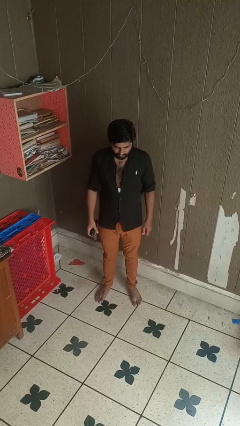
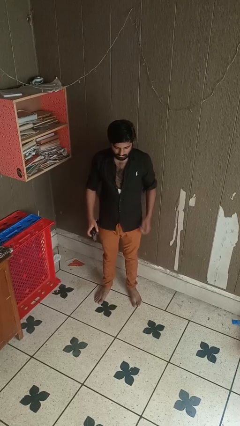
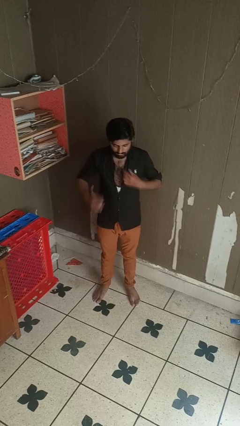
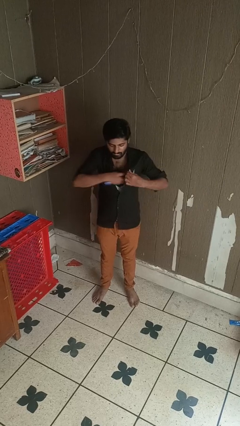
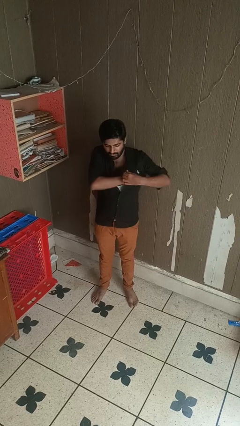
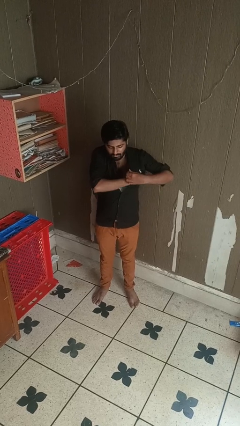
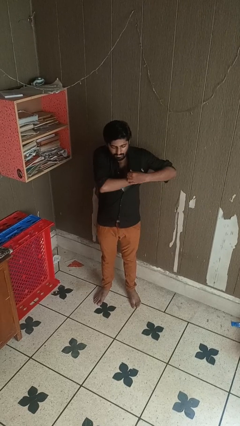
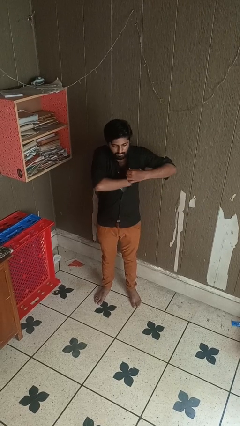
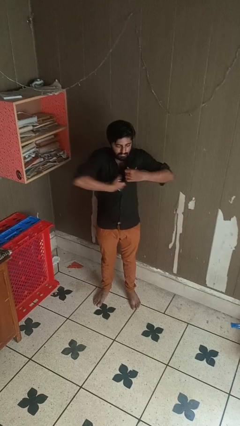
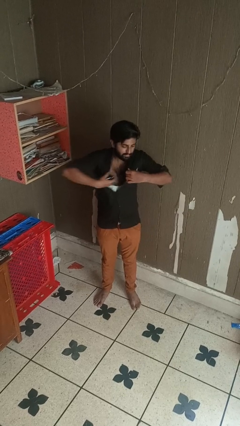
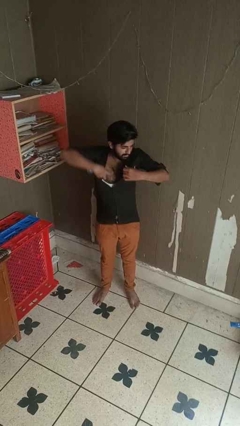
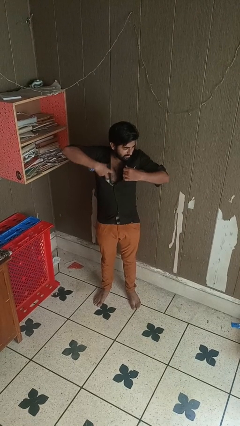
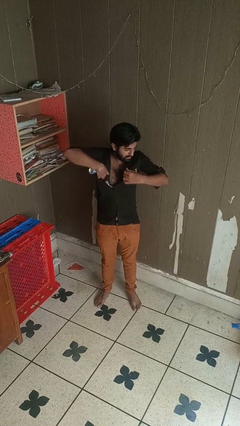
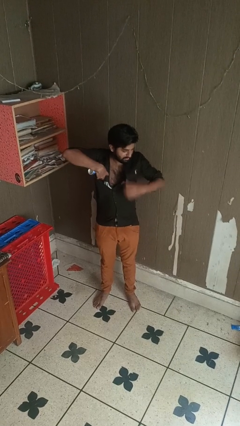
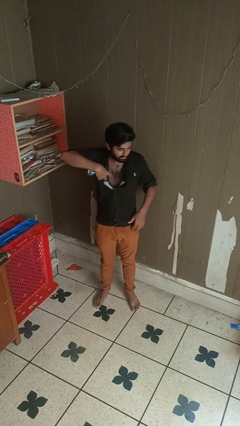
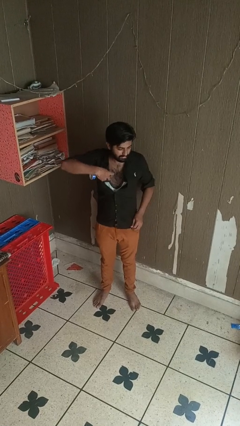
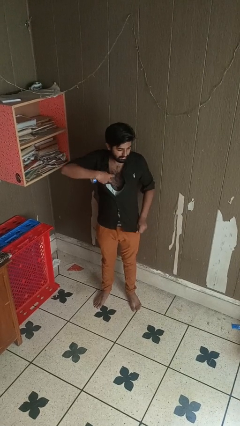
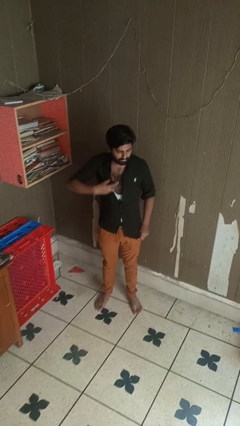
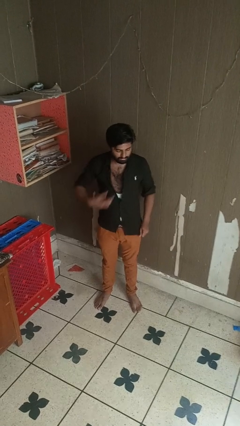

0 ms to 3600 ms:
person applies deodorant

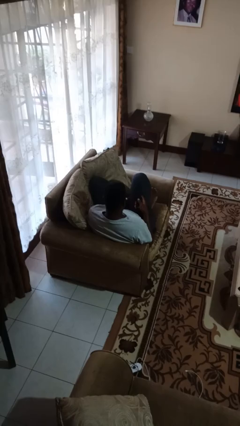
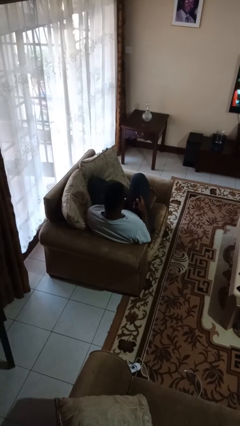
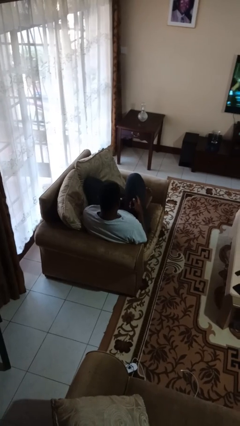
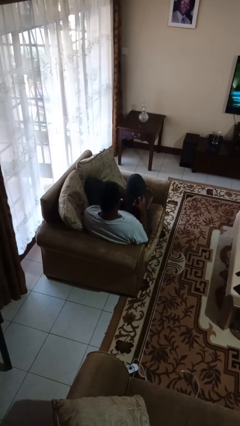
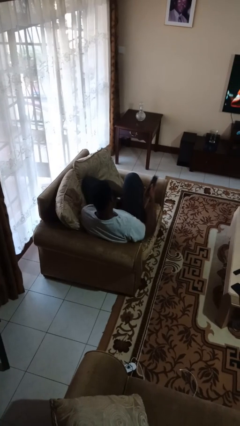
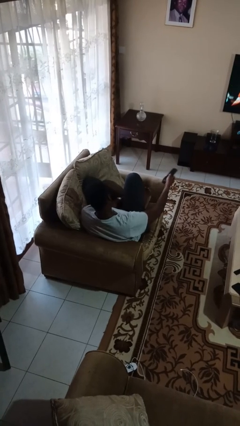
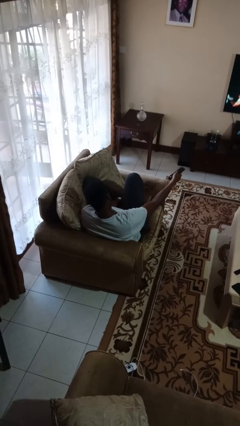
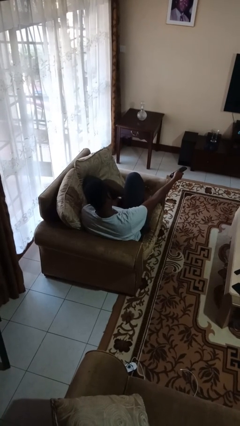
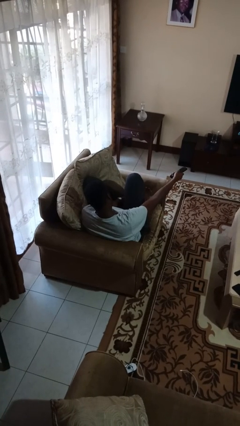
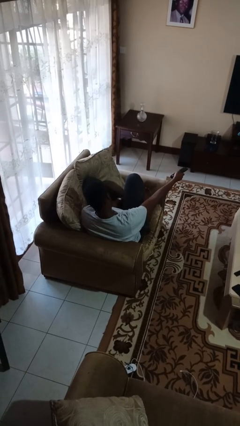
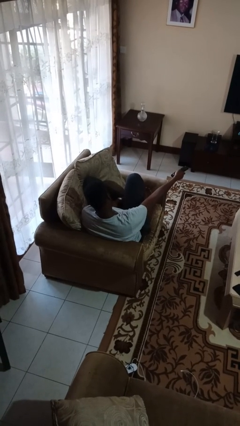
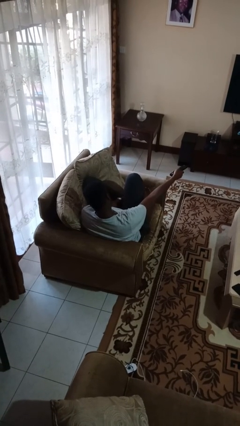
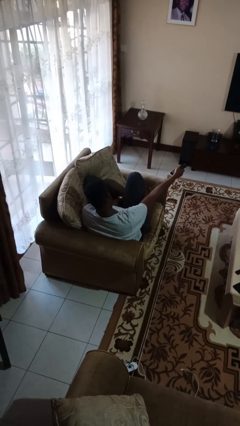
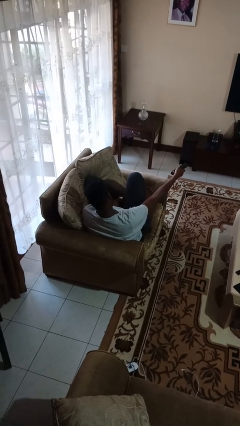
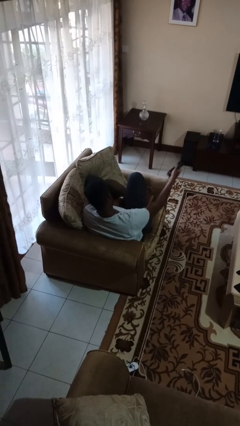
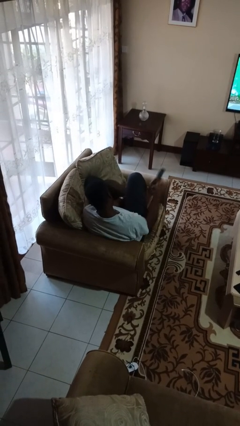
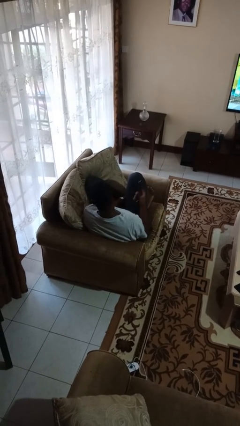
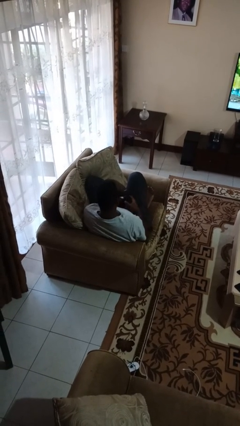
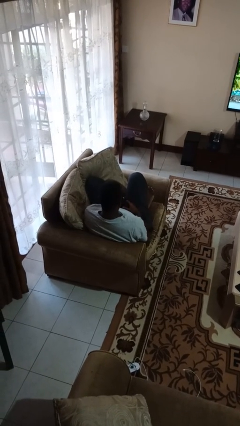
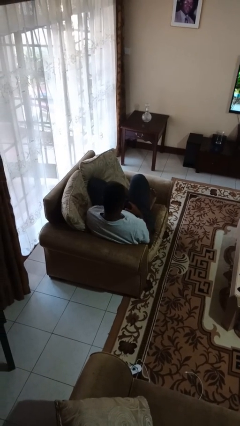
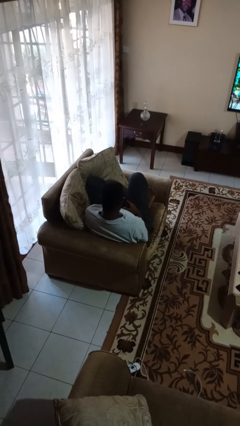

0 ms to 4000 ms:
person uses television remote

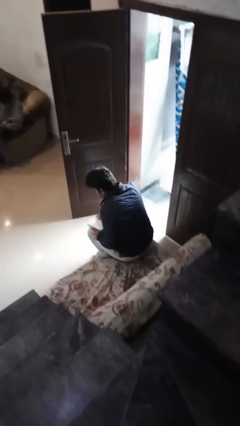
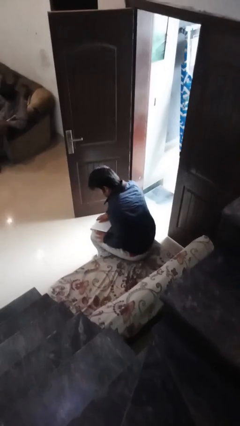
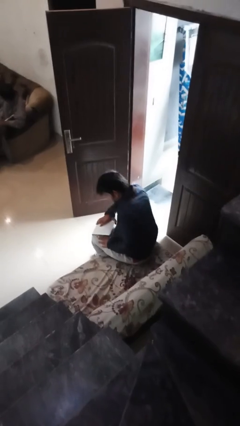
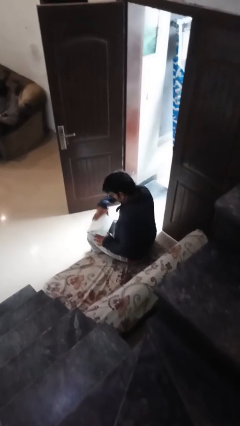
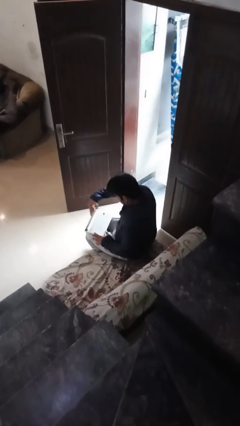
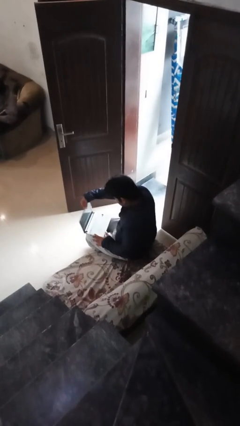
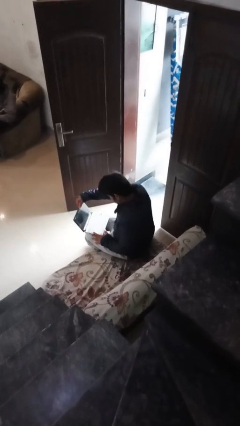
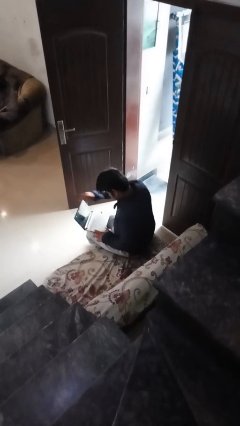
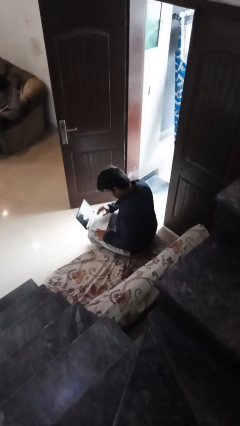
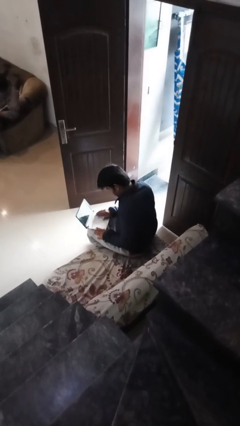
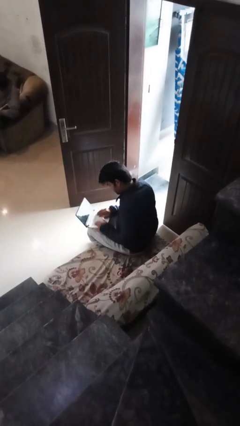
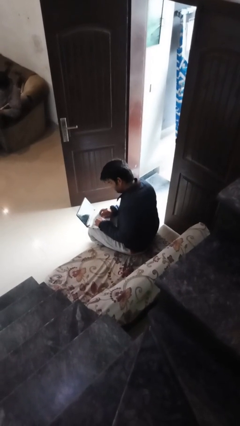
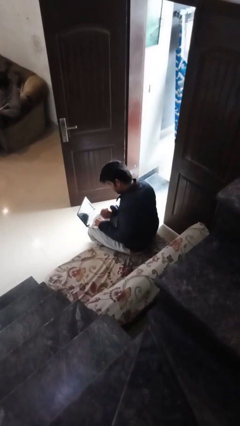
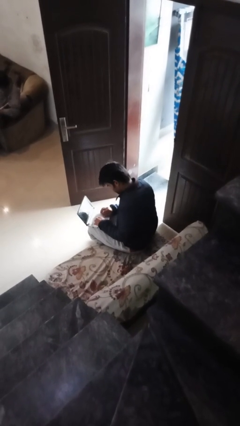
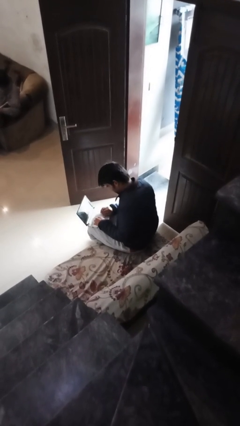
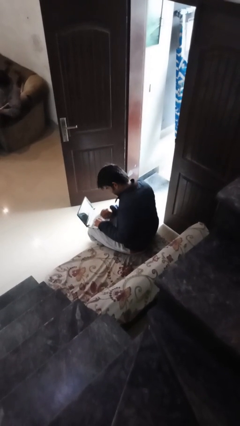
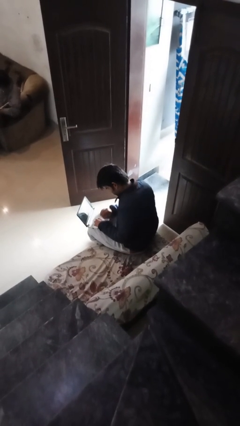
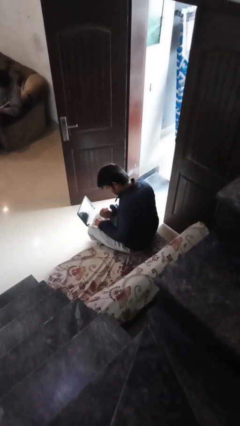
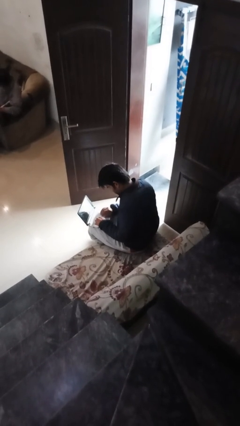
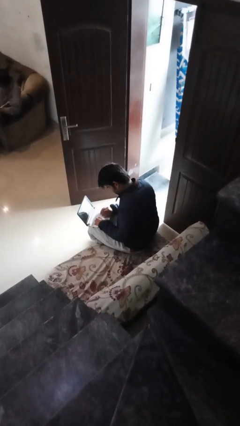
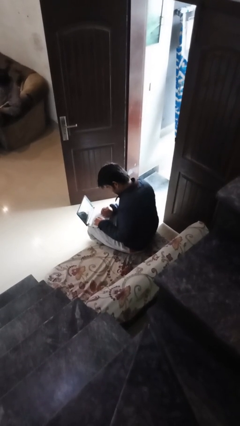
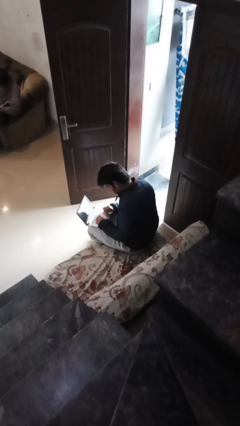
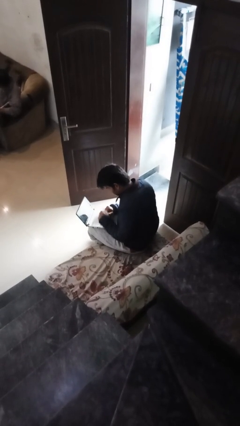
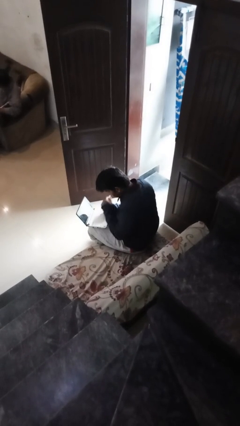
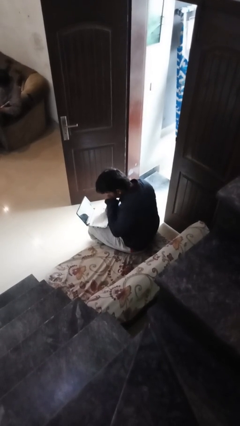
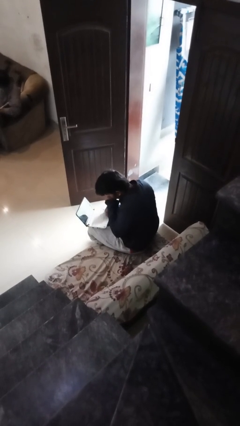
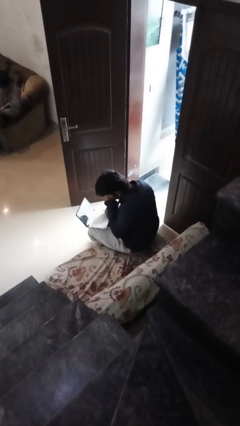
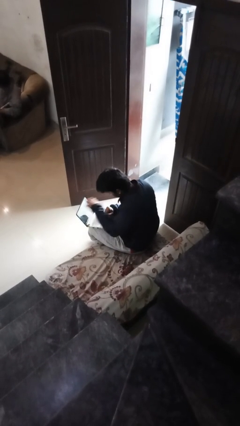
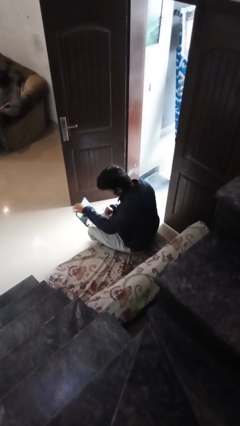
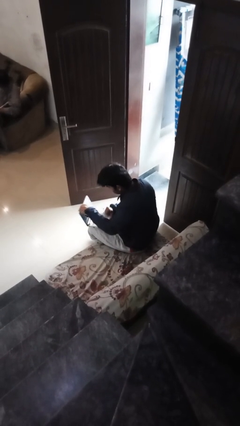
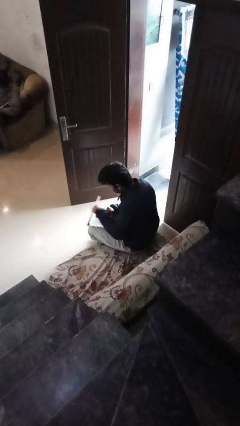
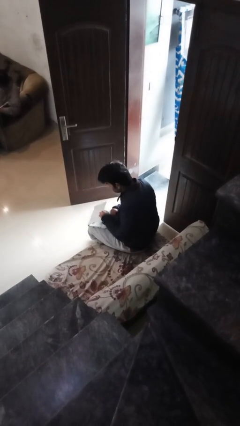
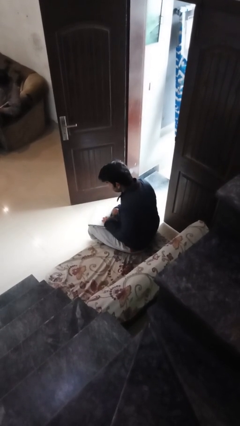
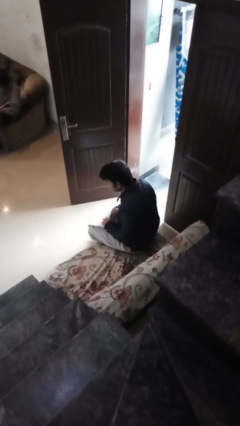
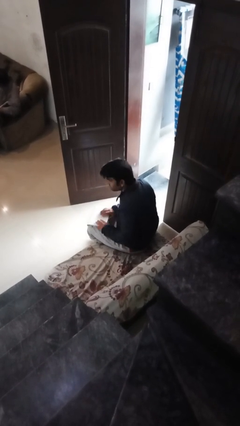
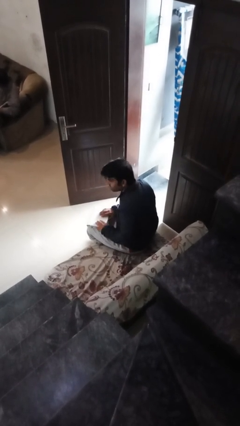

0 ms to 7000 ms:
person interacts with laptop

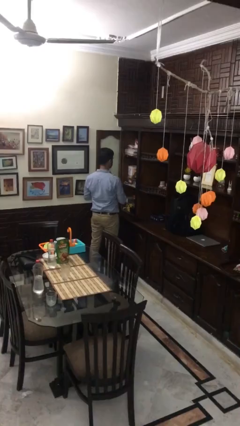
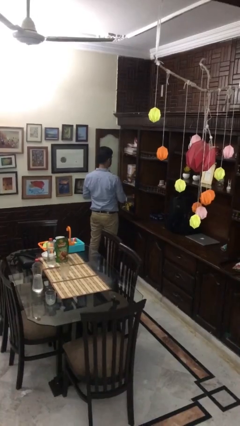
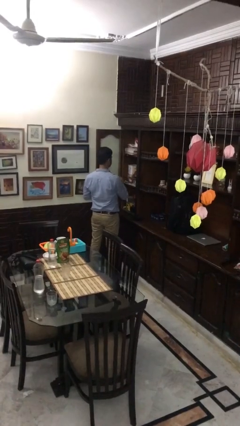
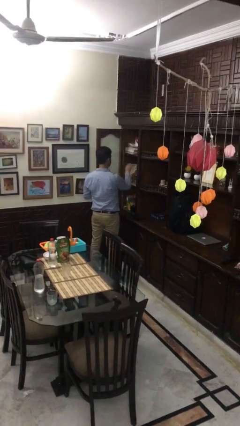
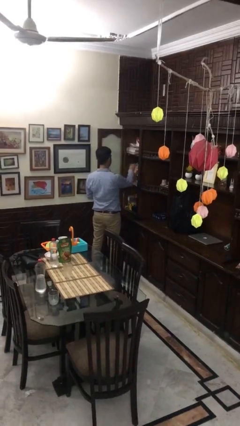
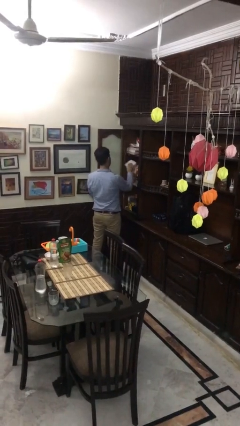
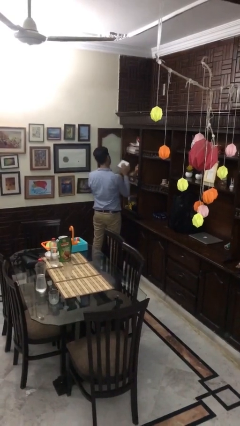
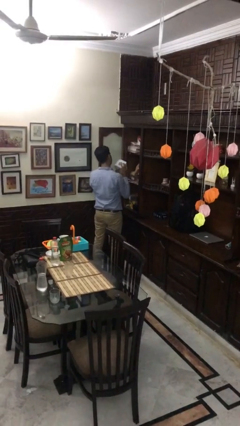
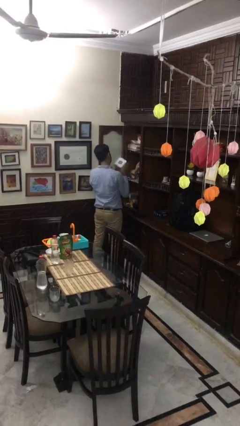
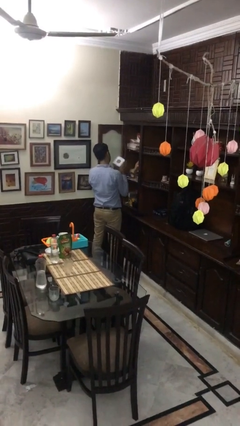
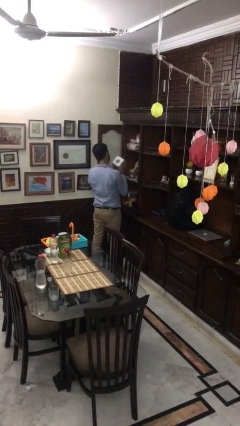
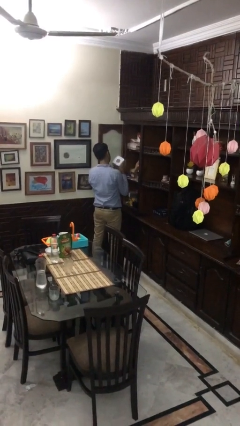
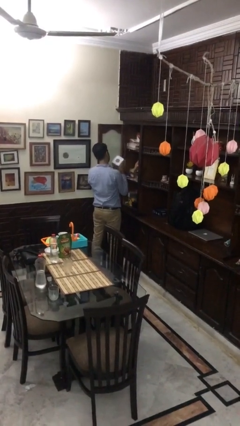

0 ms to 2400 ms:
person picks up object from cabinet

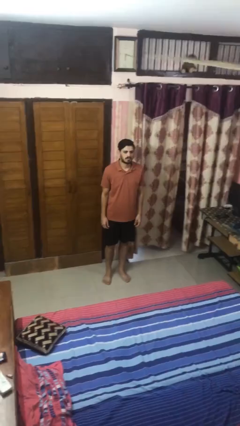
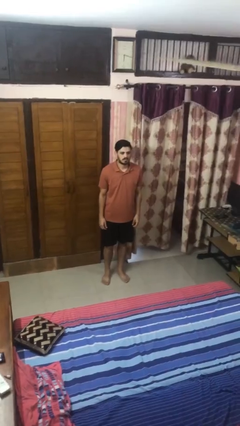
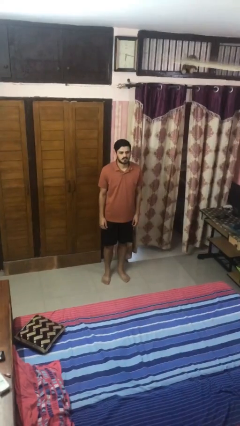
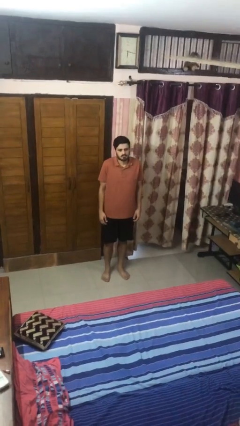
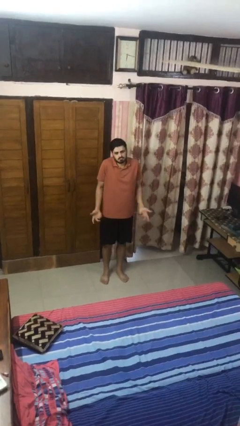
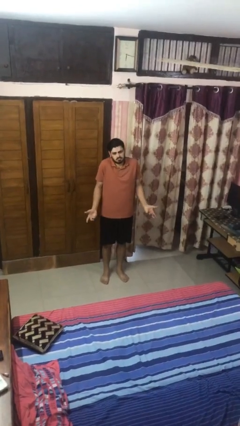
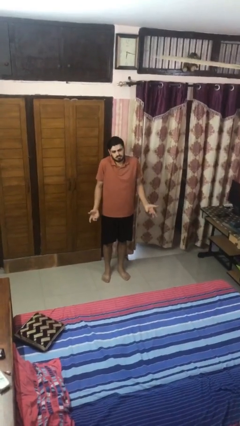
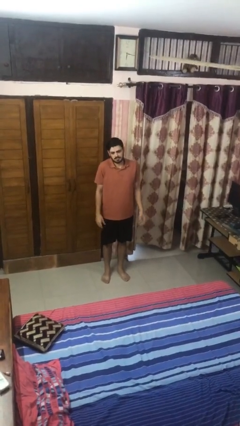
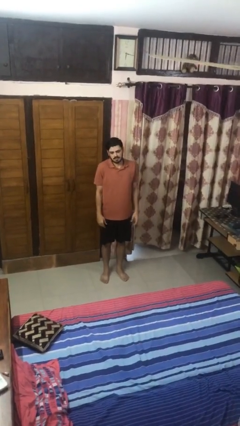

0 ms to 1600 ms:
person shrugs
